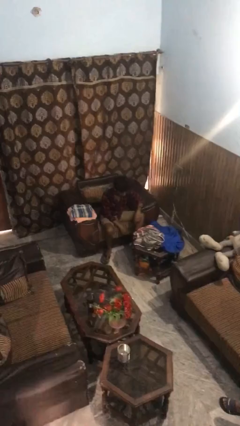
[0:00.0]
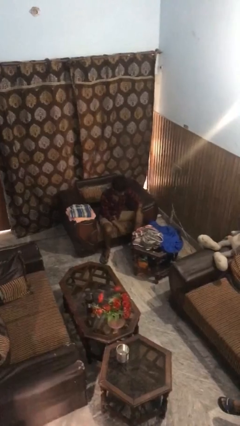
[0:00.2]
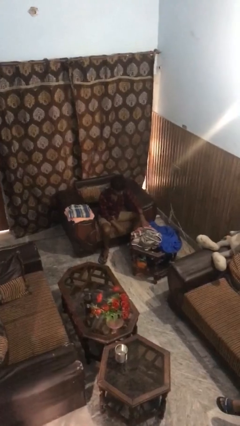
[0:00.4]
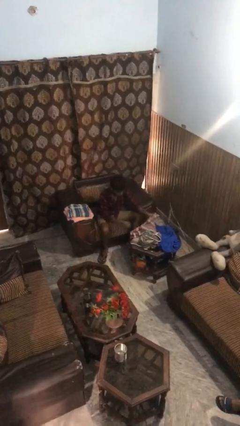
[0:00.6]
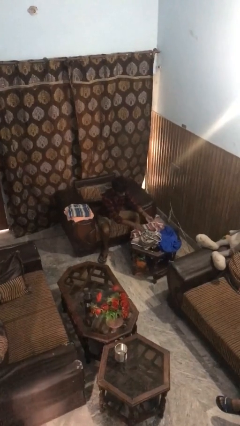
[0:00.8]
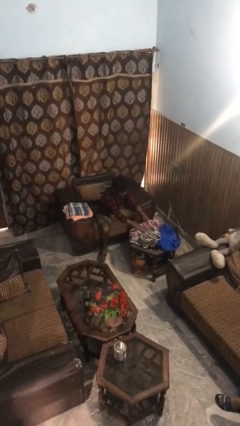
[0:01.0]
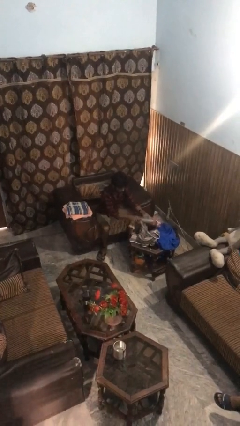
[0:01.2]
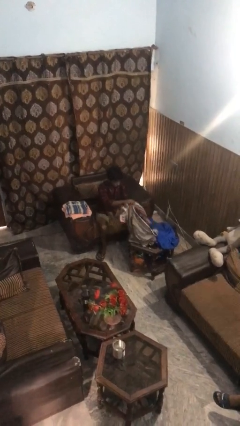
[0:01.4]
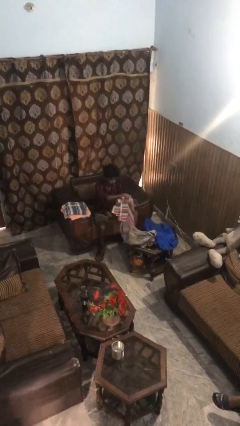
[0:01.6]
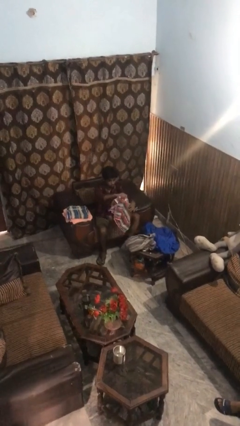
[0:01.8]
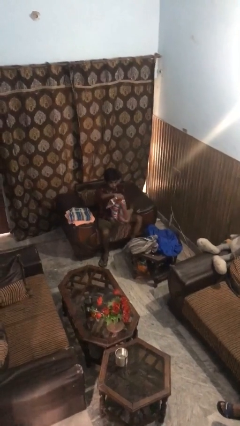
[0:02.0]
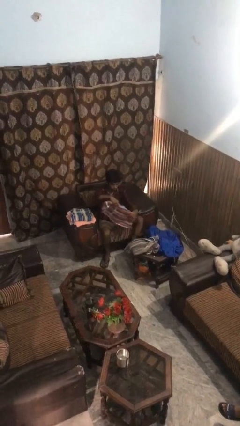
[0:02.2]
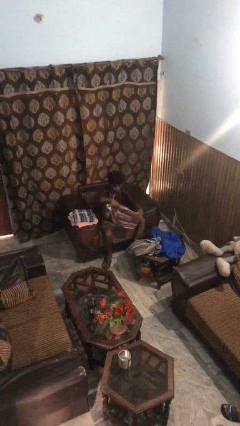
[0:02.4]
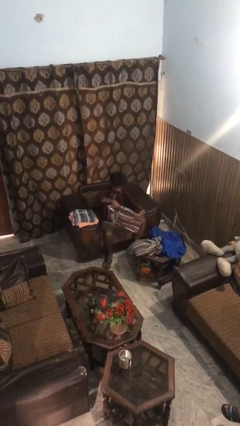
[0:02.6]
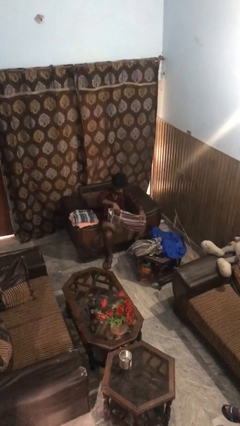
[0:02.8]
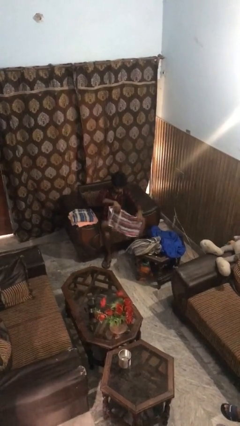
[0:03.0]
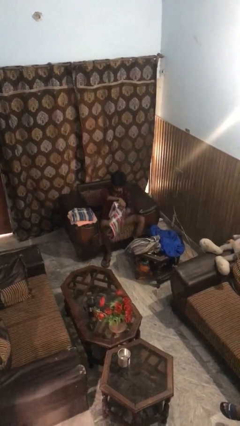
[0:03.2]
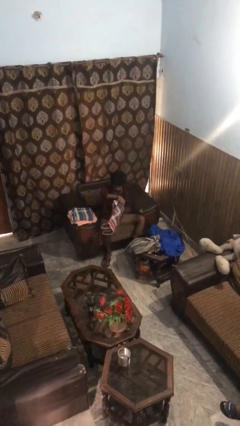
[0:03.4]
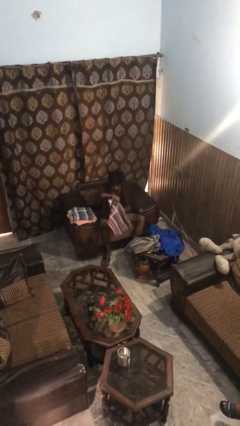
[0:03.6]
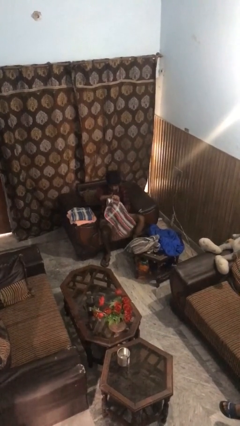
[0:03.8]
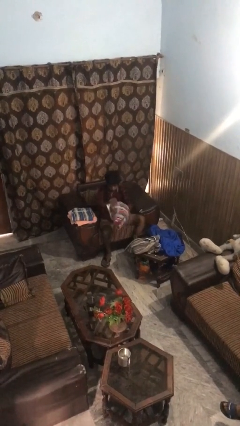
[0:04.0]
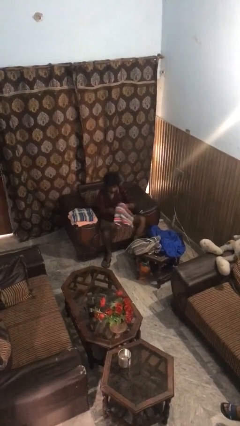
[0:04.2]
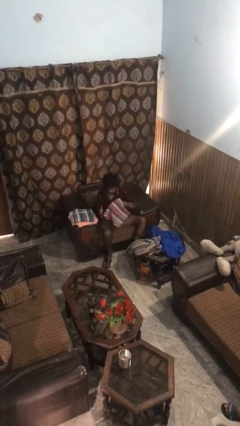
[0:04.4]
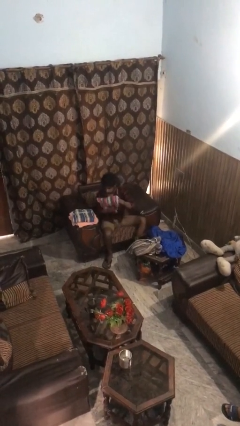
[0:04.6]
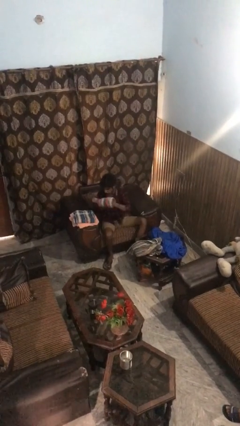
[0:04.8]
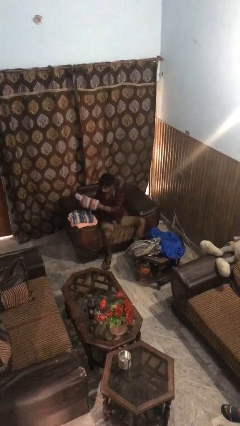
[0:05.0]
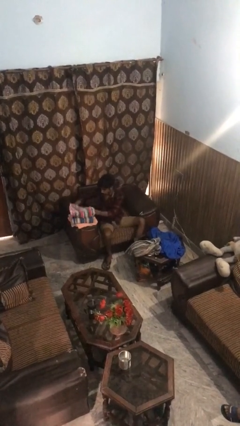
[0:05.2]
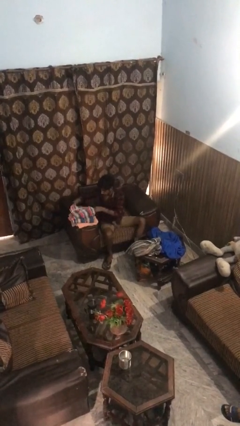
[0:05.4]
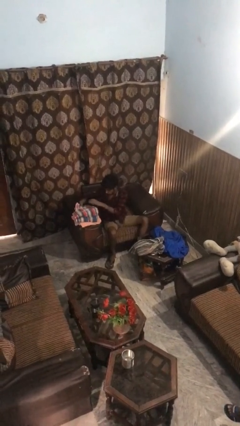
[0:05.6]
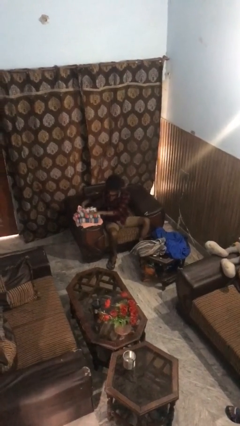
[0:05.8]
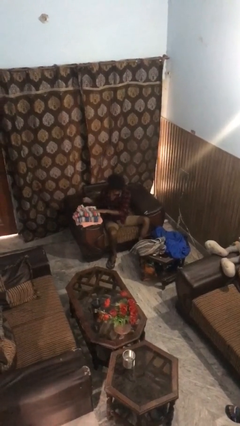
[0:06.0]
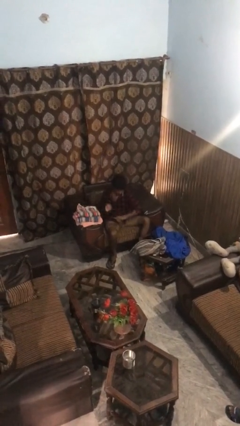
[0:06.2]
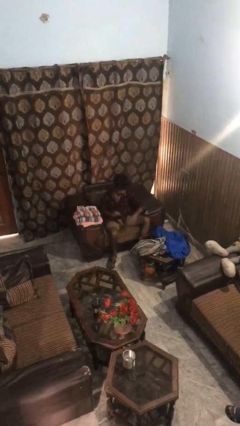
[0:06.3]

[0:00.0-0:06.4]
person folds towel

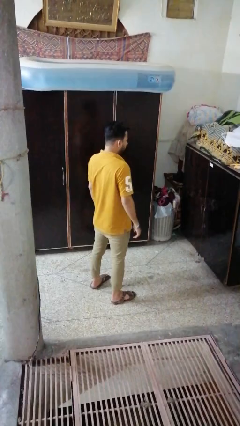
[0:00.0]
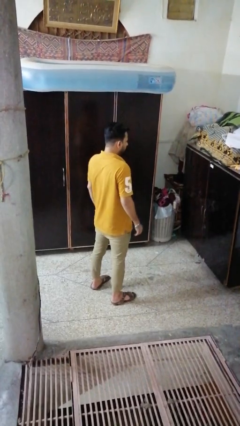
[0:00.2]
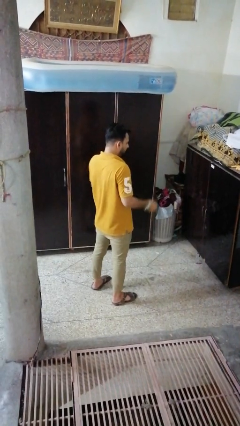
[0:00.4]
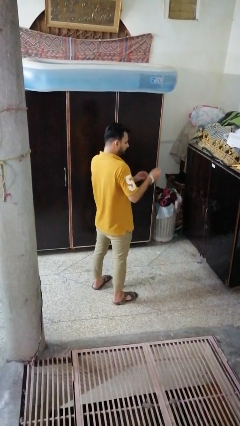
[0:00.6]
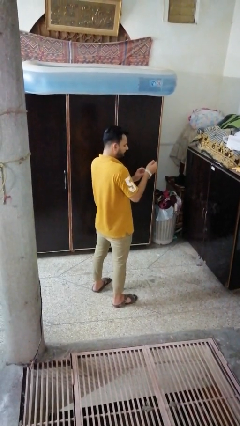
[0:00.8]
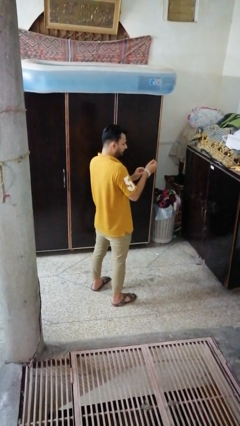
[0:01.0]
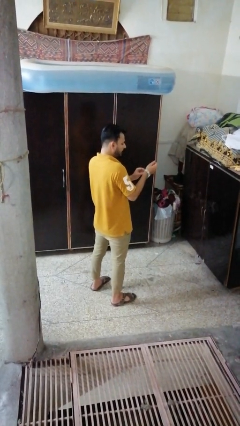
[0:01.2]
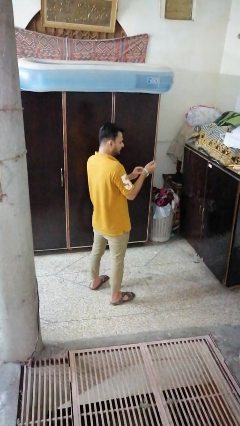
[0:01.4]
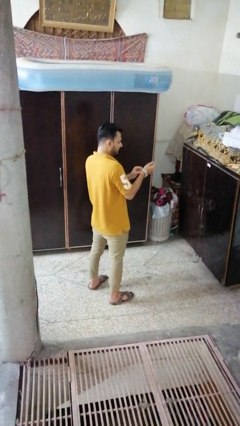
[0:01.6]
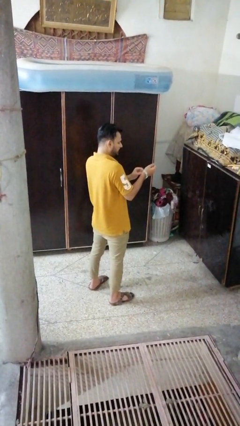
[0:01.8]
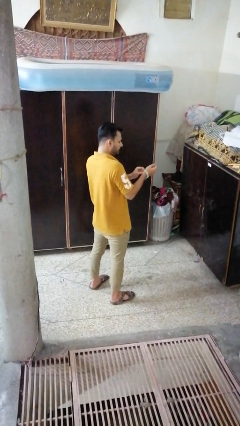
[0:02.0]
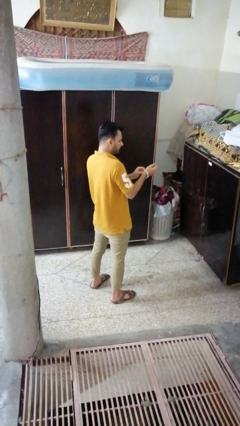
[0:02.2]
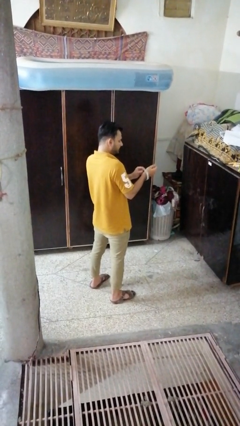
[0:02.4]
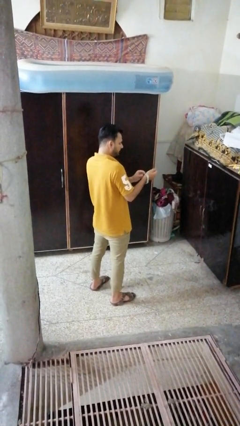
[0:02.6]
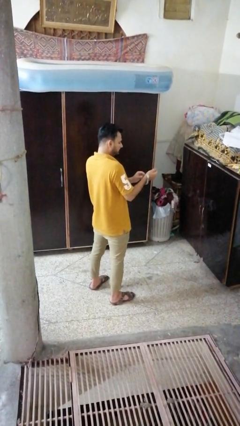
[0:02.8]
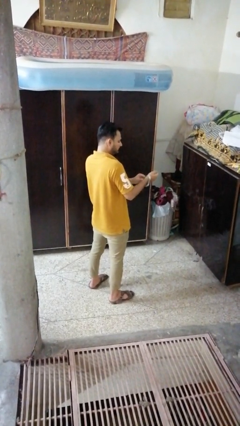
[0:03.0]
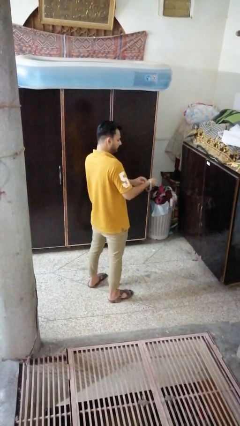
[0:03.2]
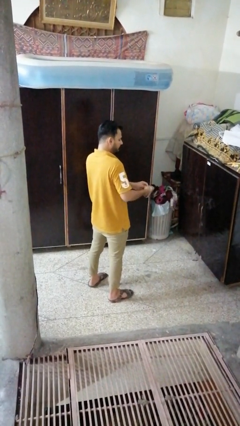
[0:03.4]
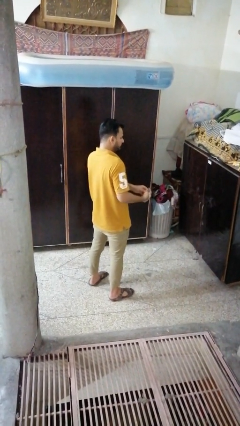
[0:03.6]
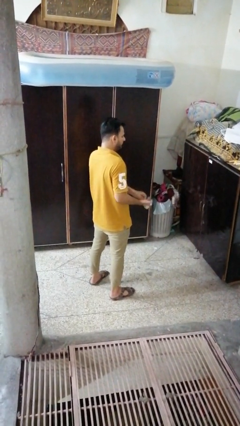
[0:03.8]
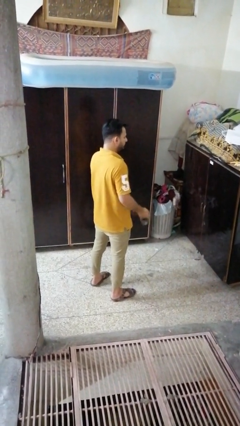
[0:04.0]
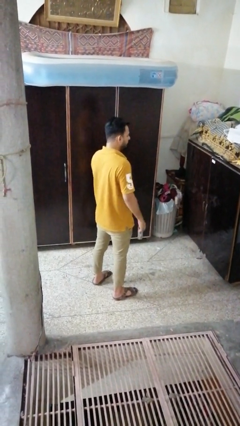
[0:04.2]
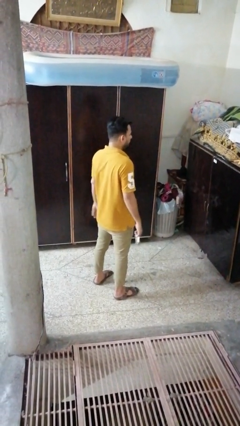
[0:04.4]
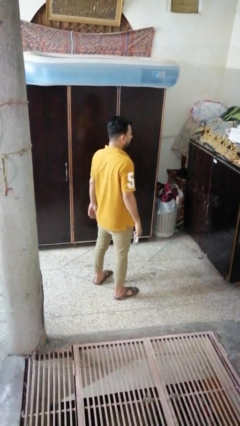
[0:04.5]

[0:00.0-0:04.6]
person takes off wristwatch

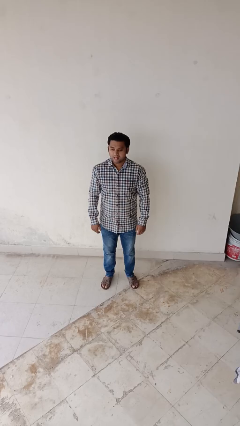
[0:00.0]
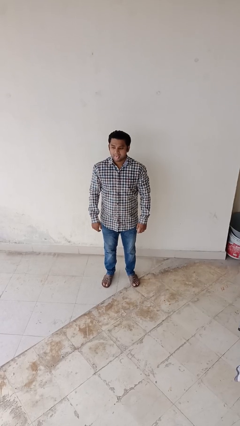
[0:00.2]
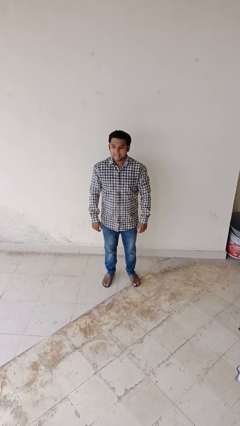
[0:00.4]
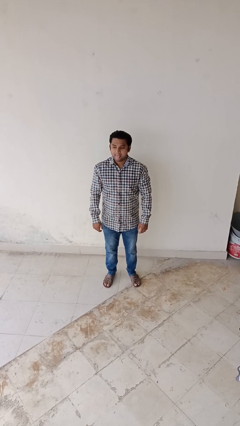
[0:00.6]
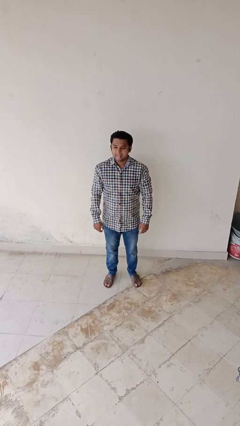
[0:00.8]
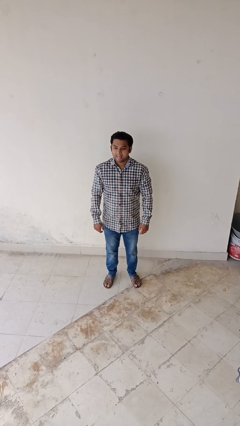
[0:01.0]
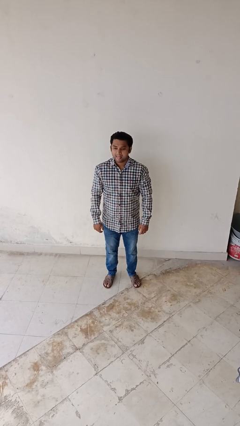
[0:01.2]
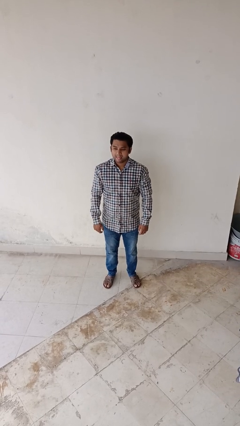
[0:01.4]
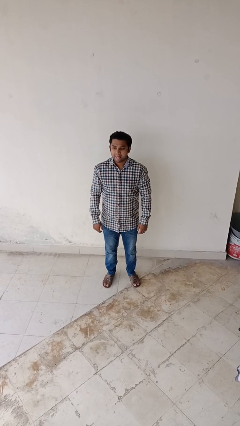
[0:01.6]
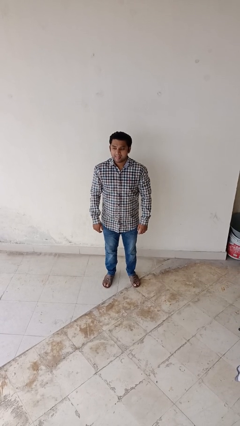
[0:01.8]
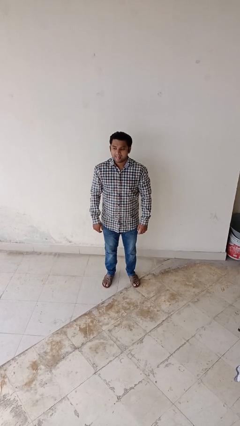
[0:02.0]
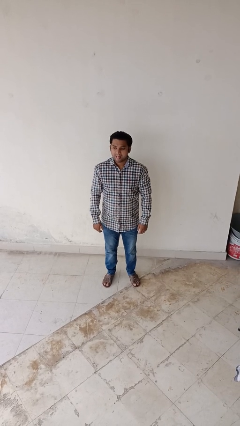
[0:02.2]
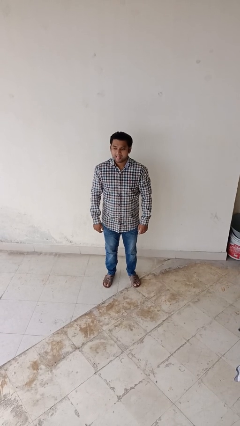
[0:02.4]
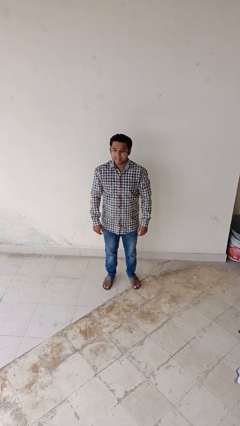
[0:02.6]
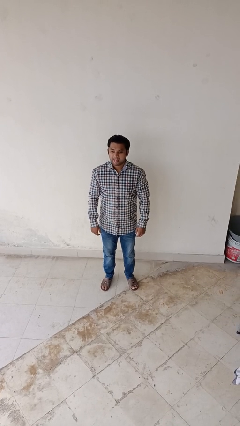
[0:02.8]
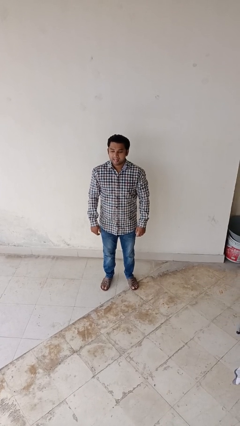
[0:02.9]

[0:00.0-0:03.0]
person sticks out tongue

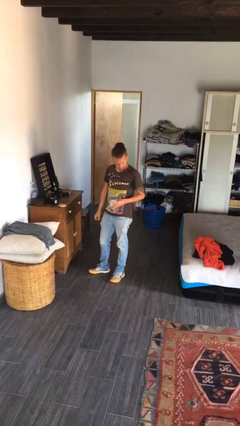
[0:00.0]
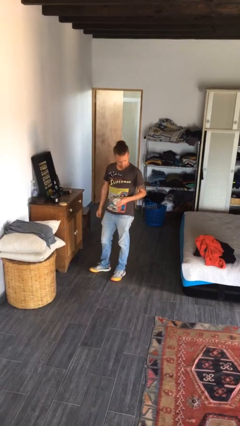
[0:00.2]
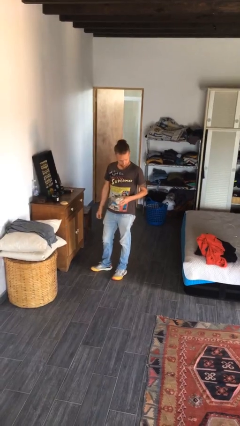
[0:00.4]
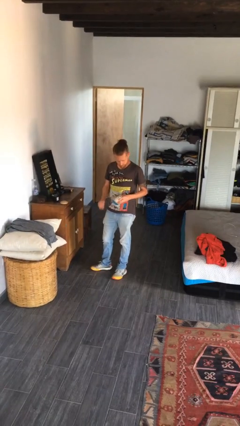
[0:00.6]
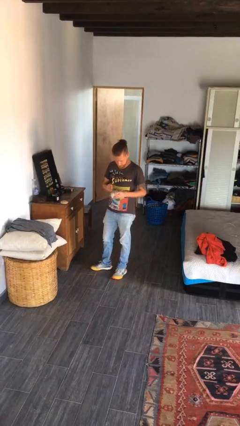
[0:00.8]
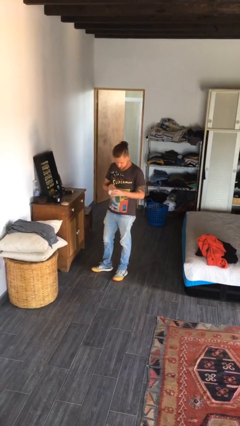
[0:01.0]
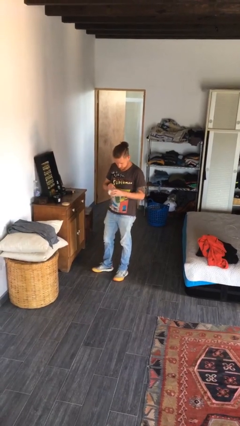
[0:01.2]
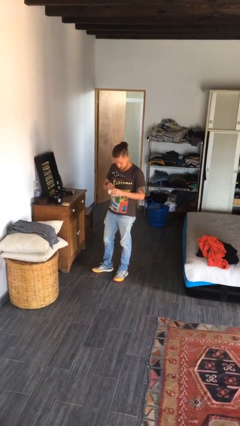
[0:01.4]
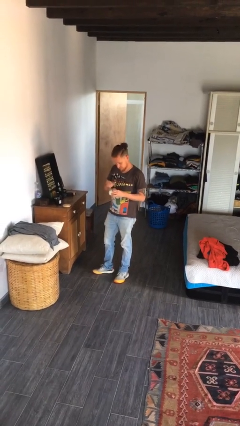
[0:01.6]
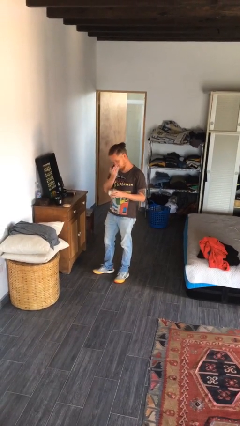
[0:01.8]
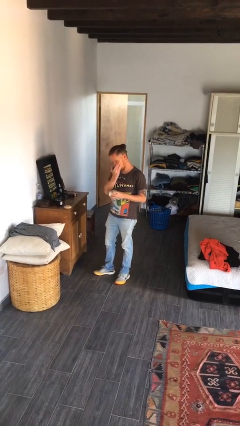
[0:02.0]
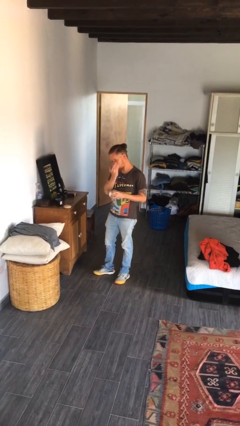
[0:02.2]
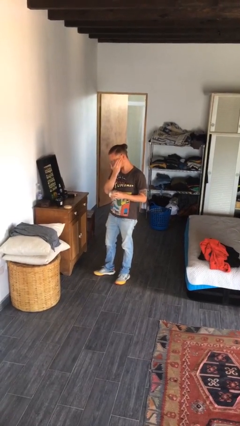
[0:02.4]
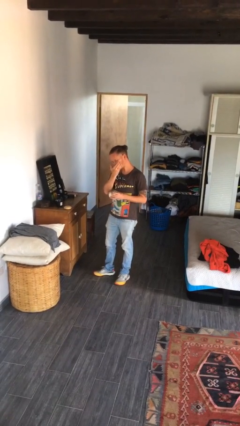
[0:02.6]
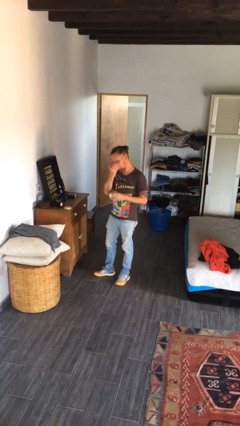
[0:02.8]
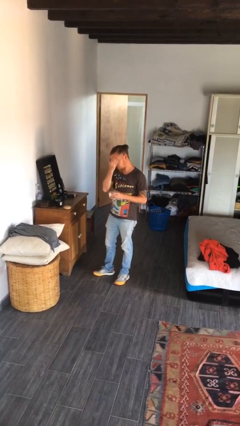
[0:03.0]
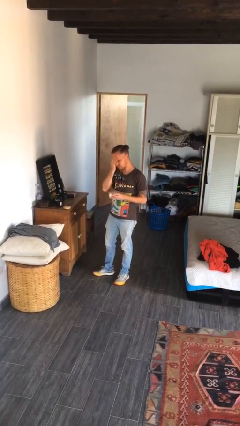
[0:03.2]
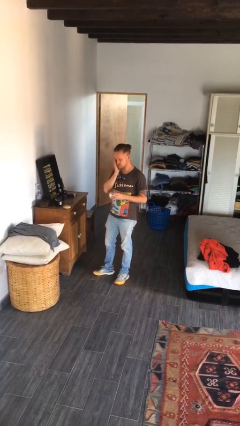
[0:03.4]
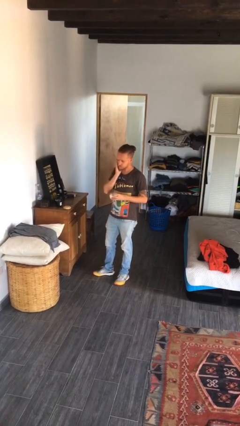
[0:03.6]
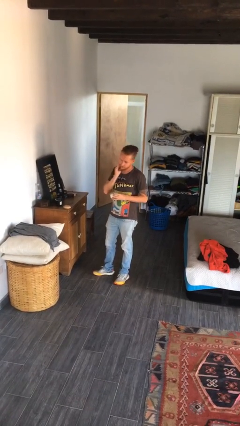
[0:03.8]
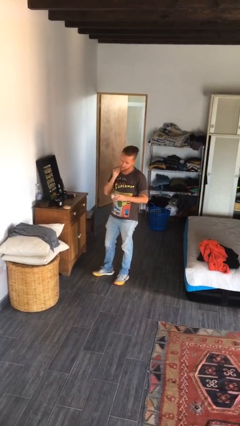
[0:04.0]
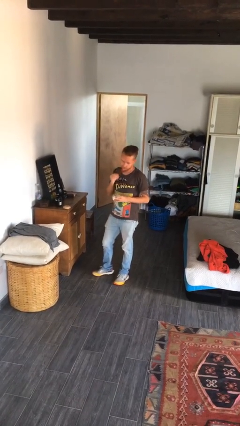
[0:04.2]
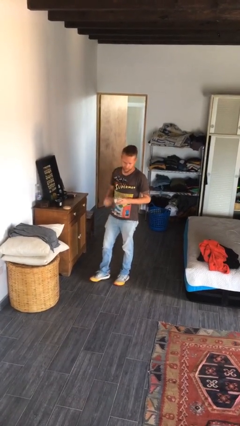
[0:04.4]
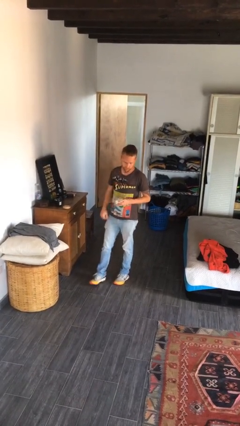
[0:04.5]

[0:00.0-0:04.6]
person applies facial moisturizer
